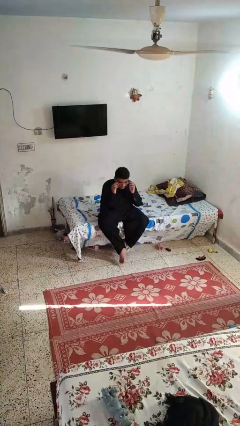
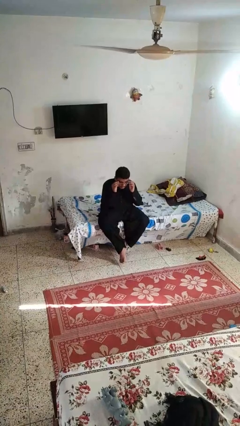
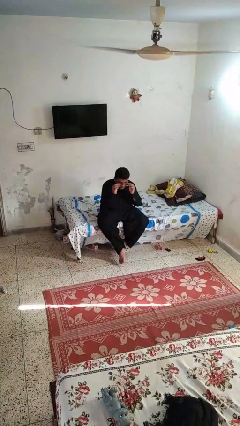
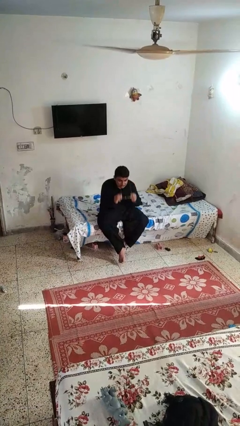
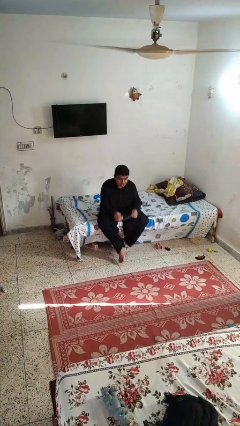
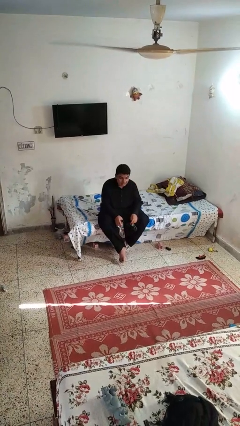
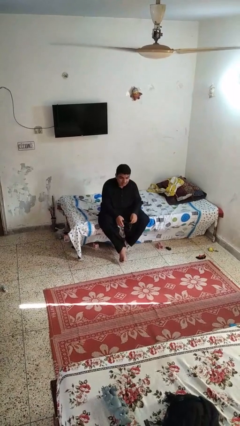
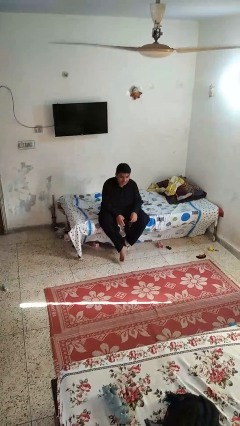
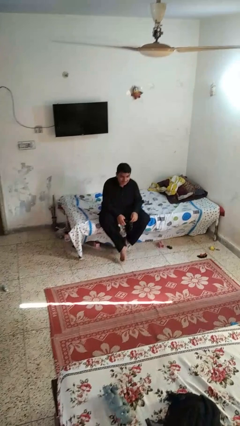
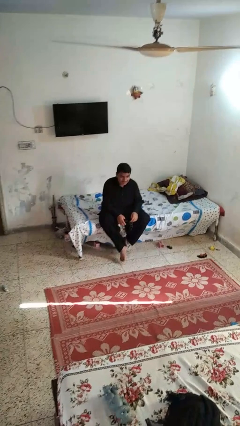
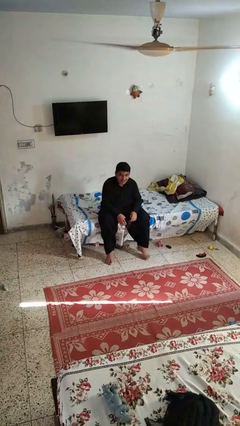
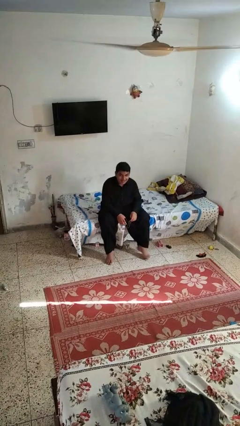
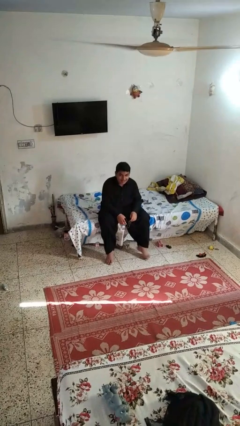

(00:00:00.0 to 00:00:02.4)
person takes off glasses

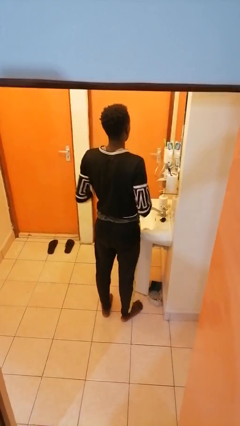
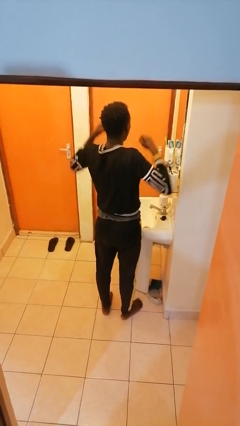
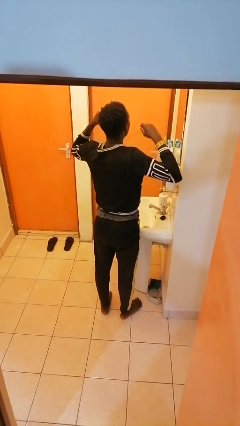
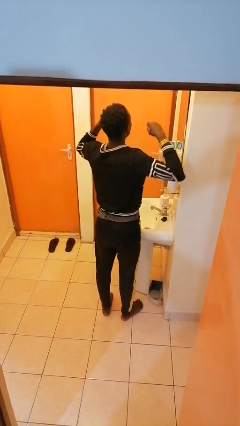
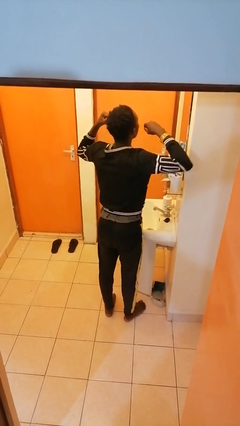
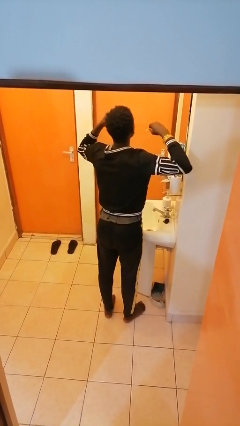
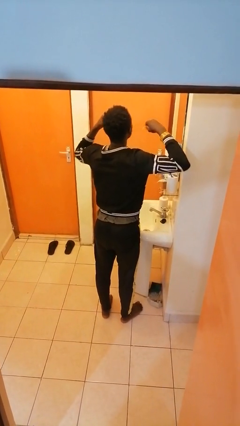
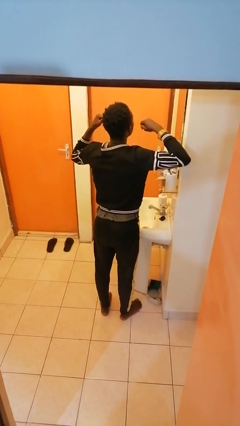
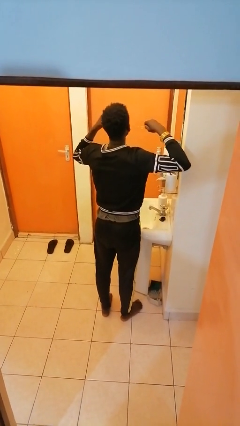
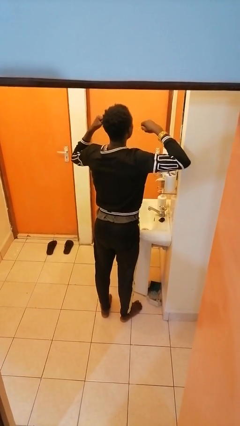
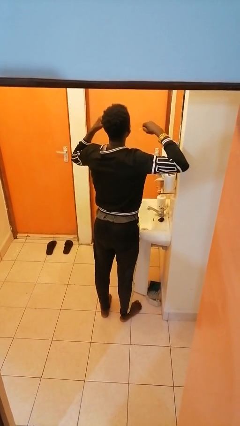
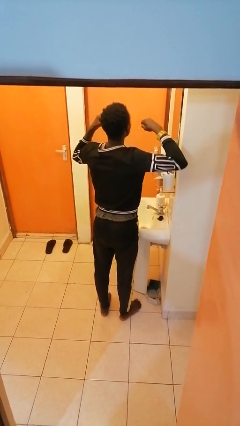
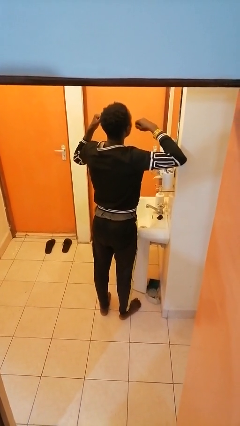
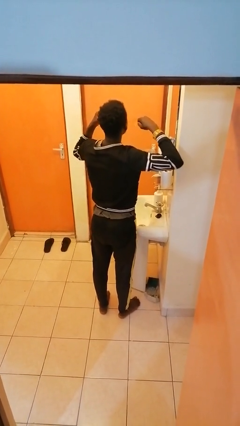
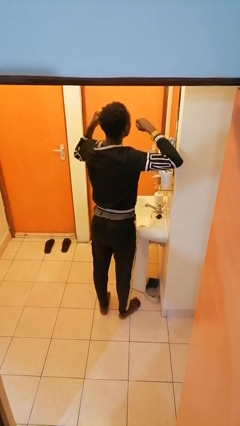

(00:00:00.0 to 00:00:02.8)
person flosses

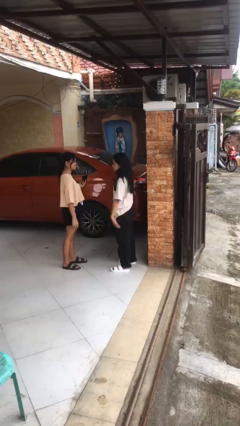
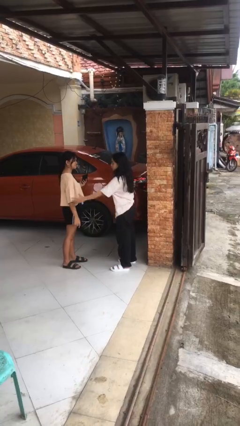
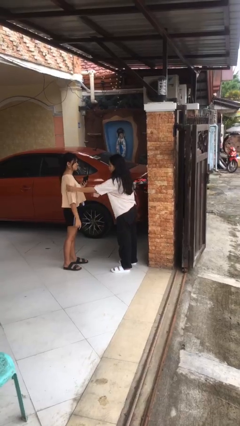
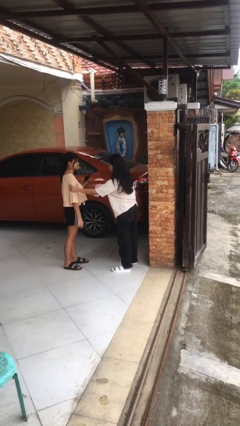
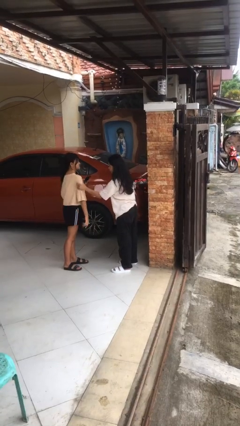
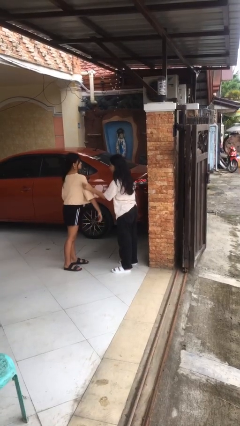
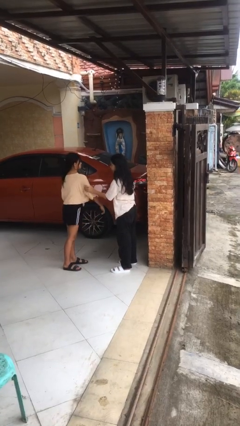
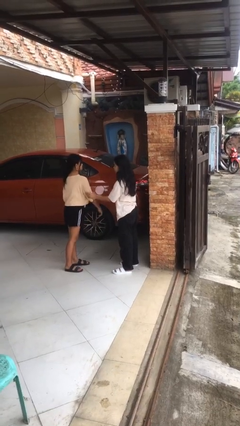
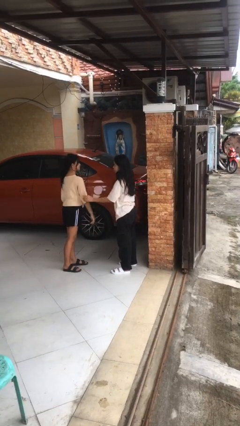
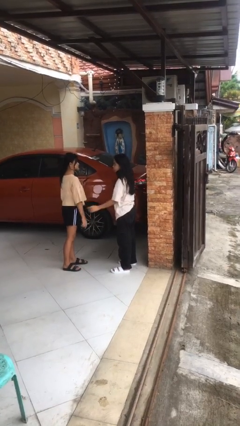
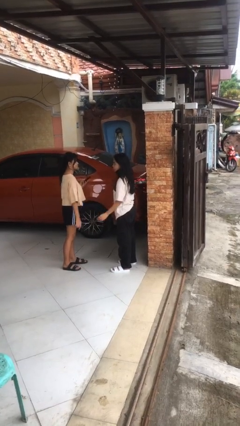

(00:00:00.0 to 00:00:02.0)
person grabs person by bicep

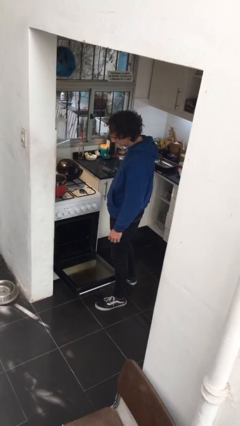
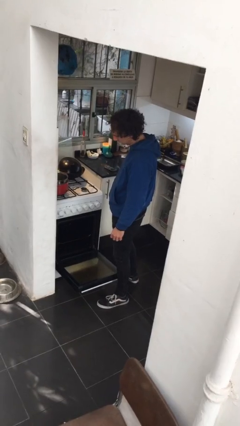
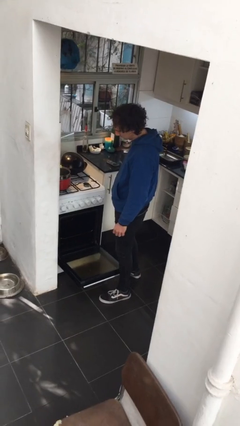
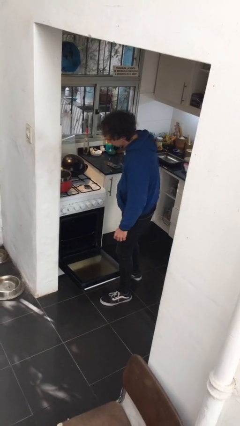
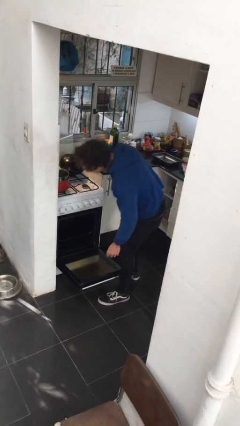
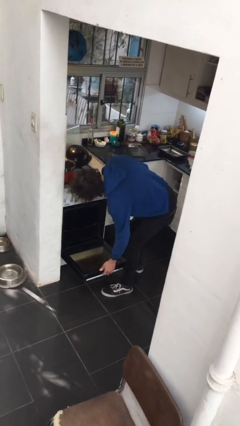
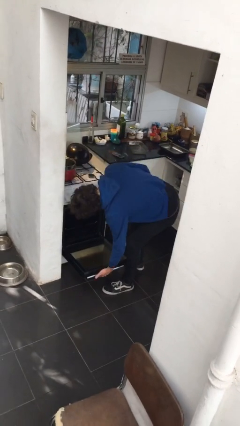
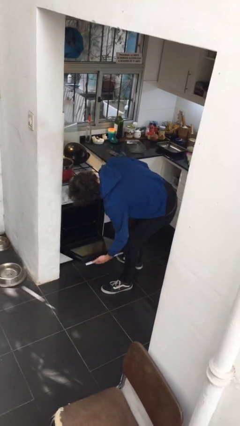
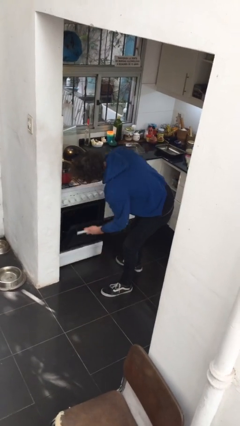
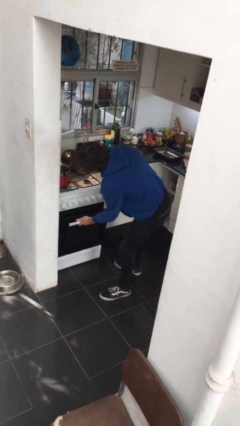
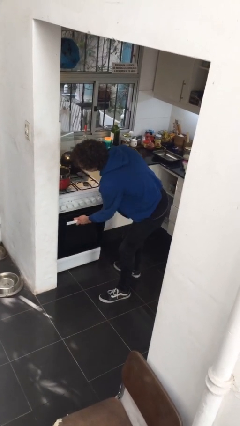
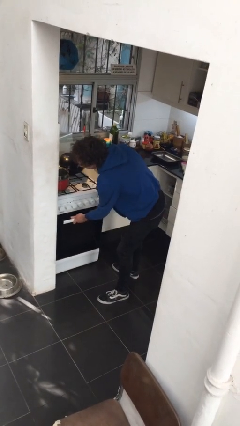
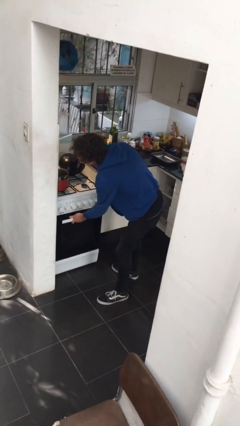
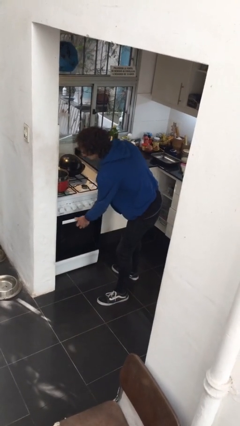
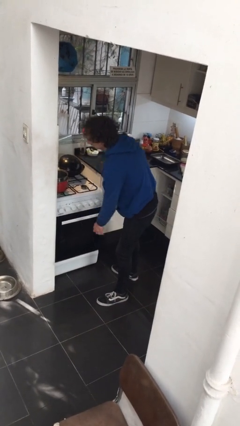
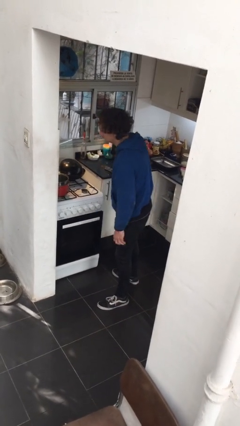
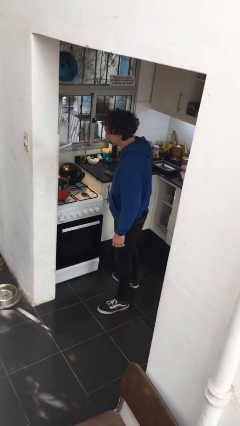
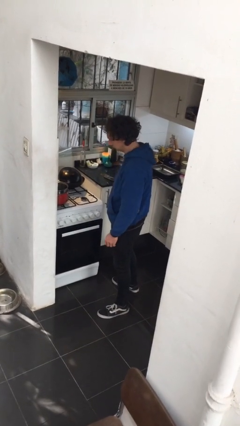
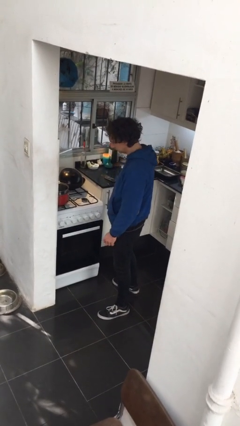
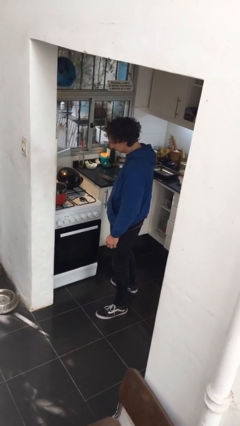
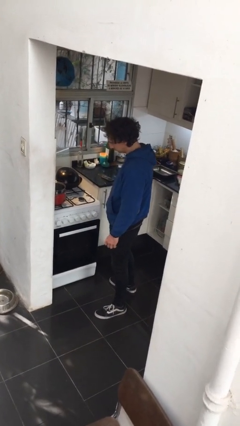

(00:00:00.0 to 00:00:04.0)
person closes oven door

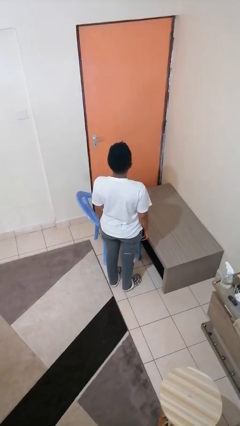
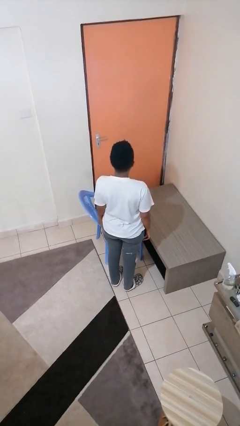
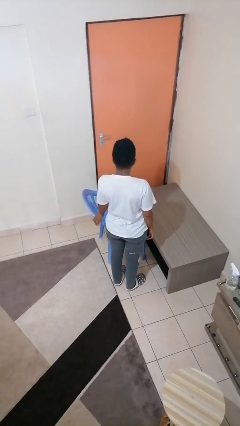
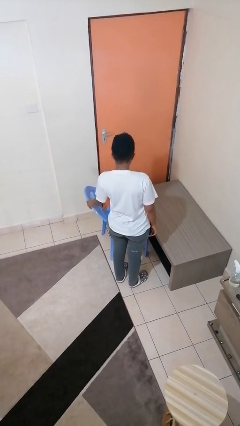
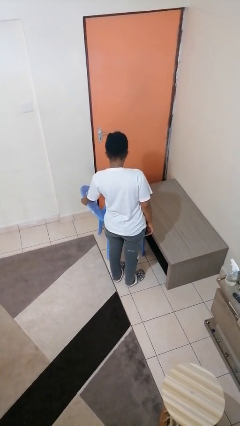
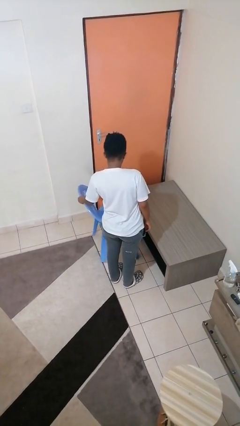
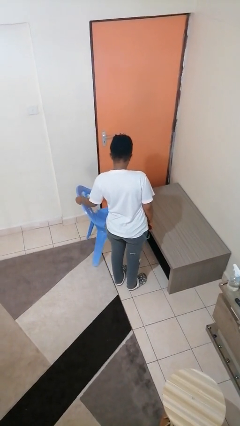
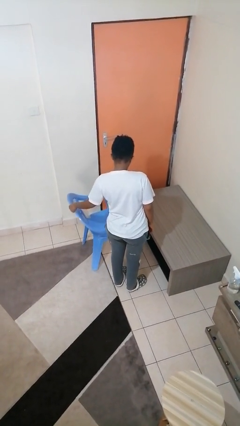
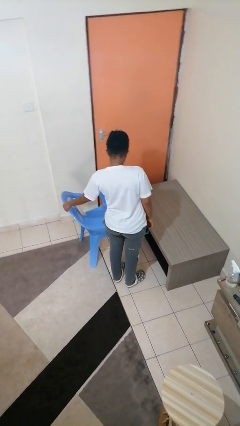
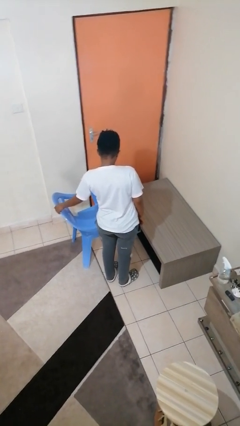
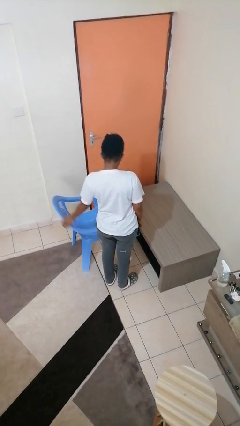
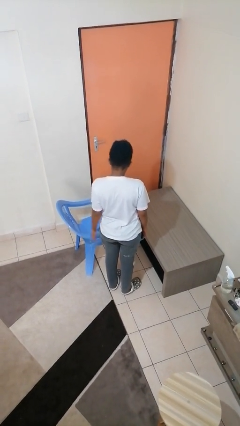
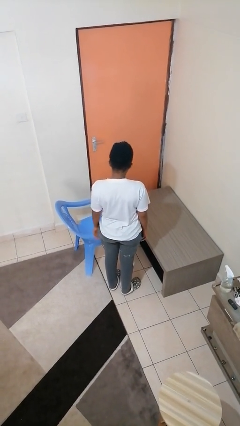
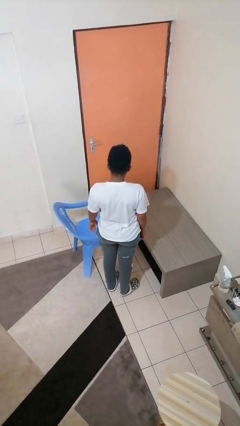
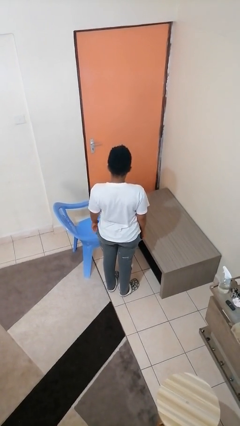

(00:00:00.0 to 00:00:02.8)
person pulls out chair

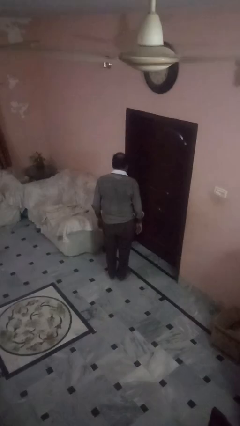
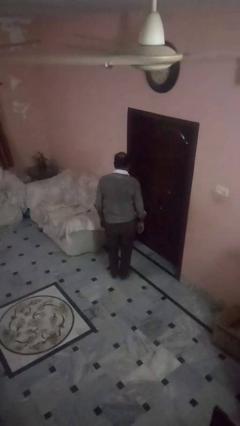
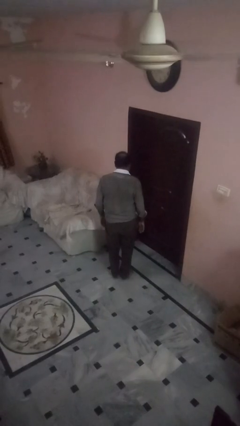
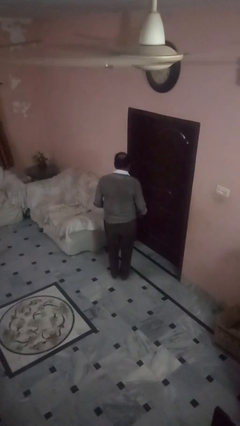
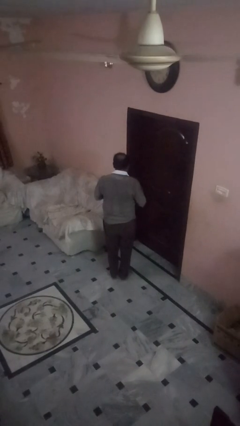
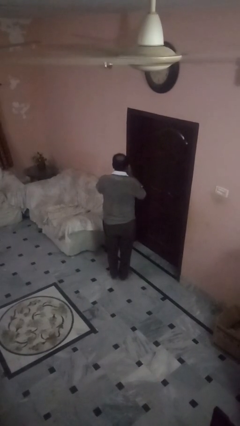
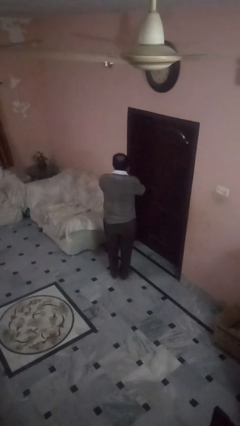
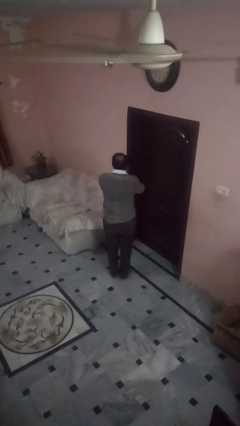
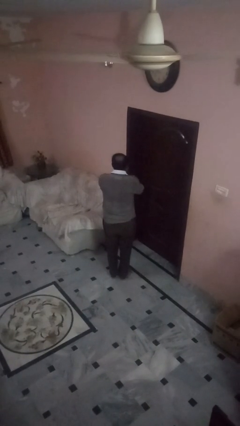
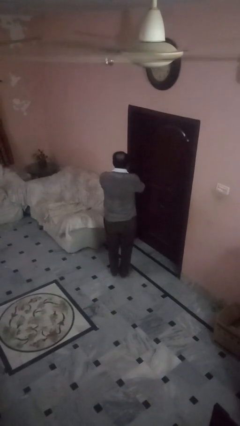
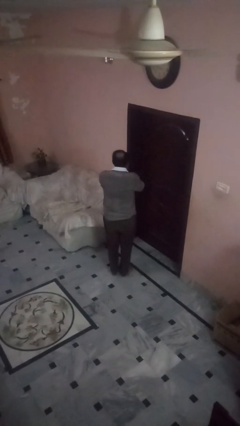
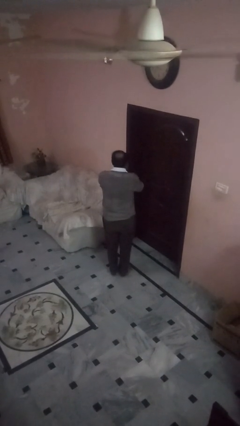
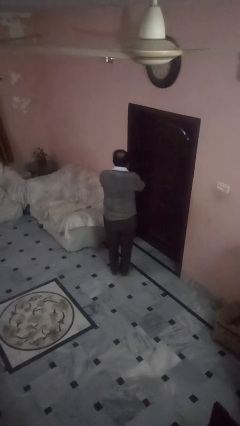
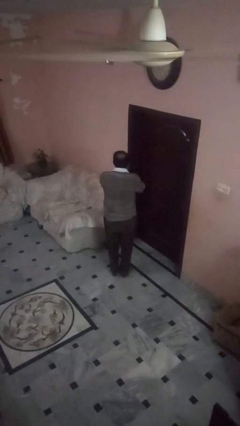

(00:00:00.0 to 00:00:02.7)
person covers face with hands

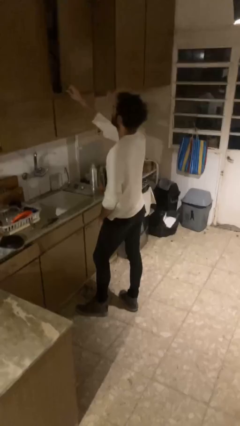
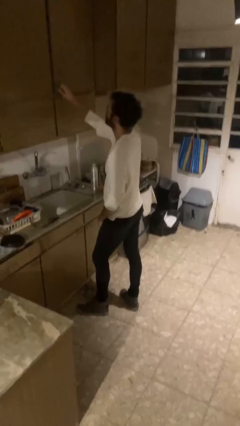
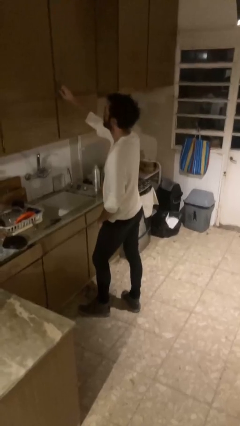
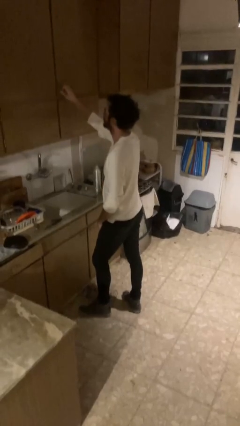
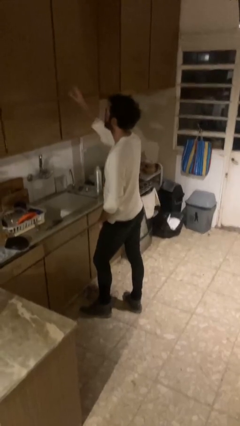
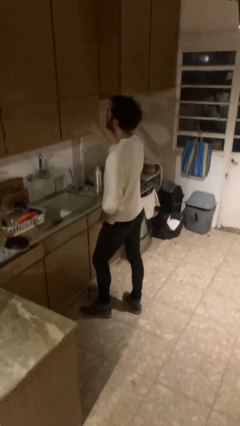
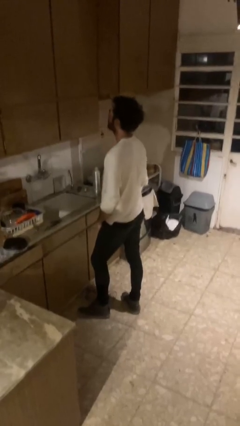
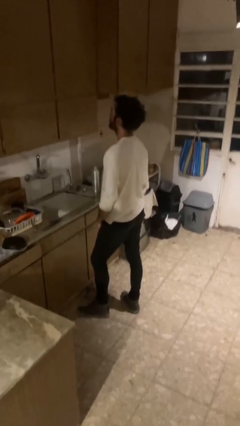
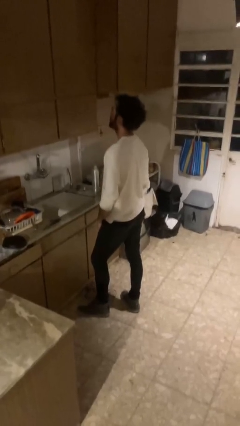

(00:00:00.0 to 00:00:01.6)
person closes cabinet
